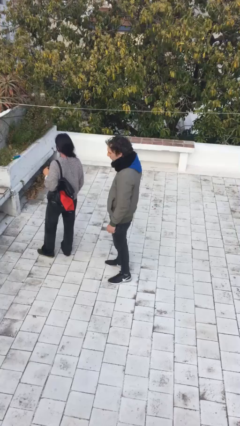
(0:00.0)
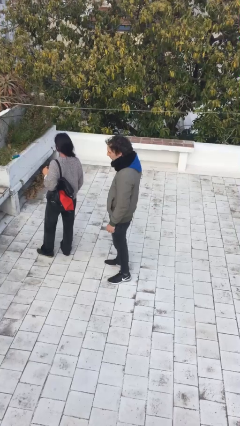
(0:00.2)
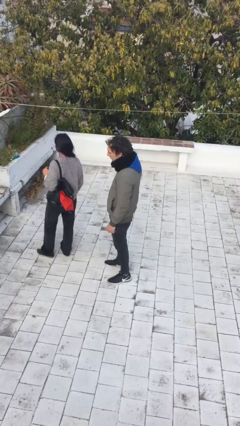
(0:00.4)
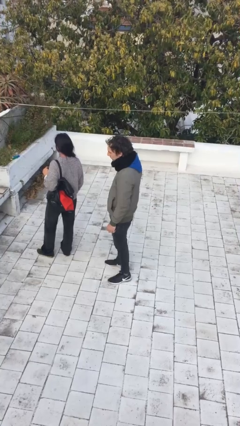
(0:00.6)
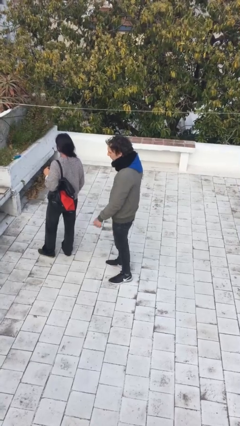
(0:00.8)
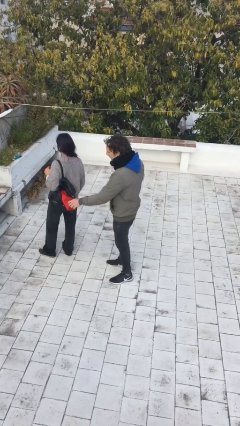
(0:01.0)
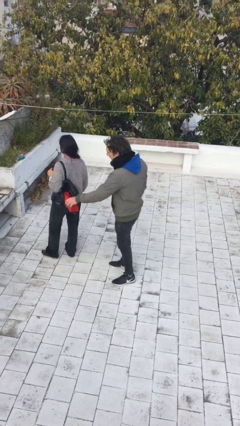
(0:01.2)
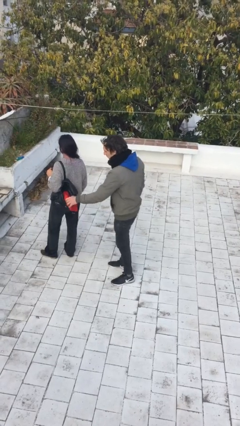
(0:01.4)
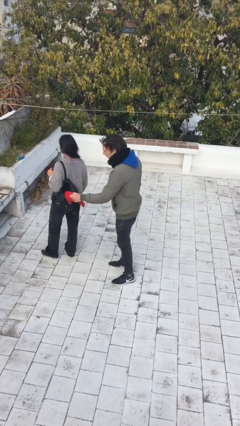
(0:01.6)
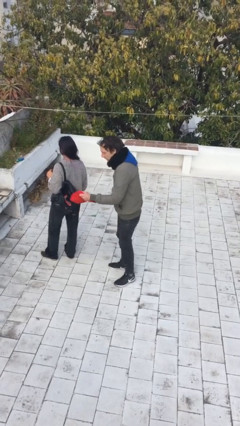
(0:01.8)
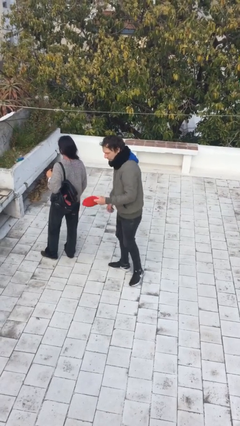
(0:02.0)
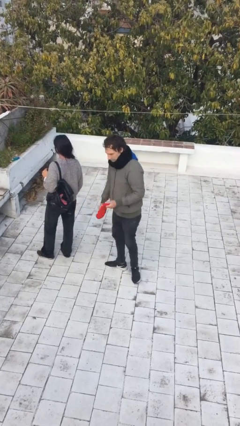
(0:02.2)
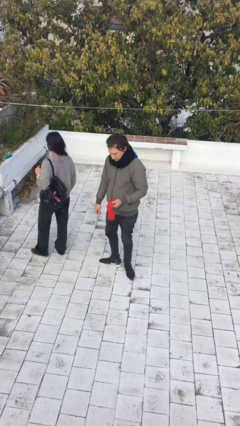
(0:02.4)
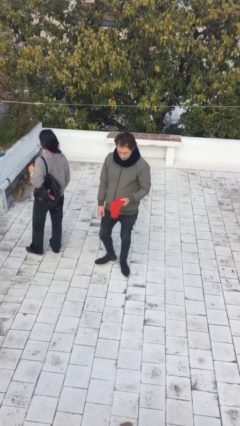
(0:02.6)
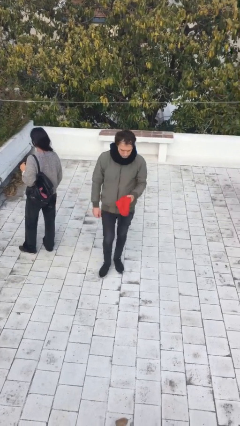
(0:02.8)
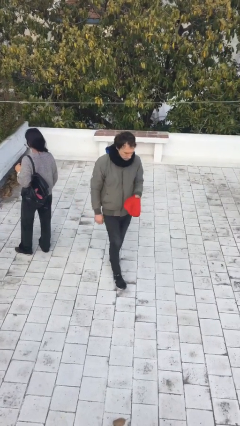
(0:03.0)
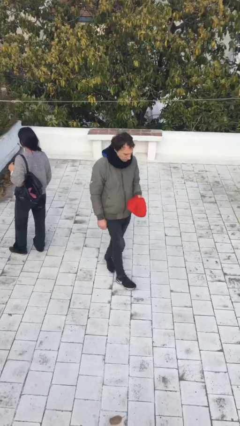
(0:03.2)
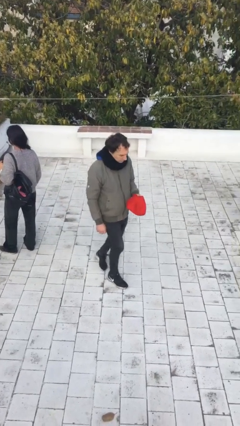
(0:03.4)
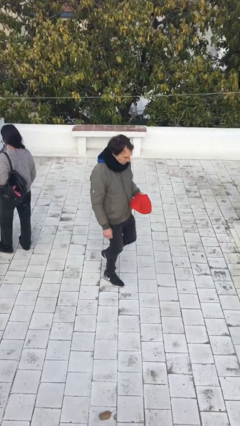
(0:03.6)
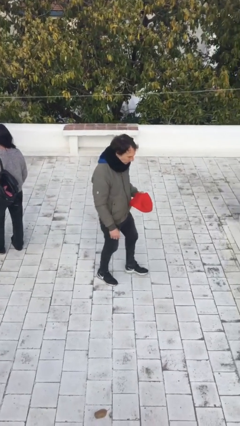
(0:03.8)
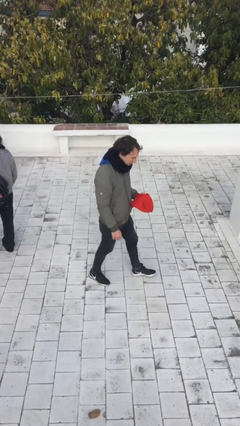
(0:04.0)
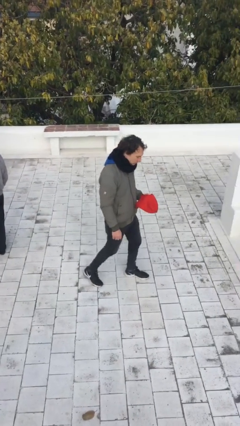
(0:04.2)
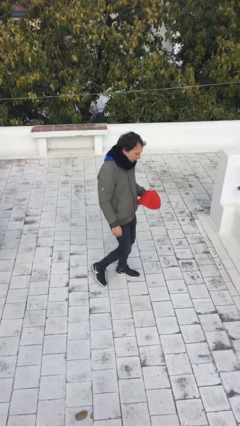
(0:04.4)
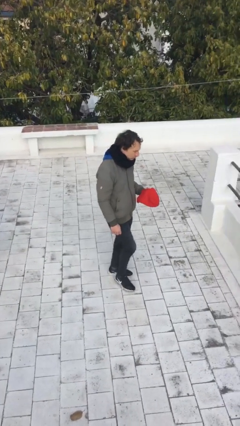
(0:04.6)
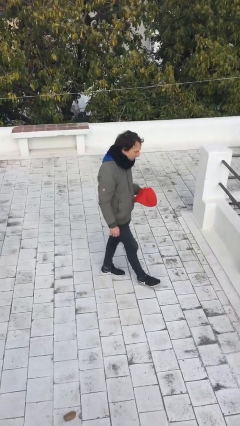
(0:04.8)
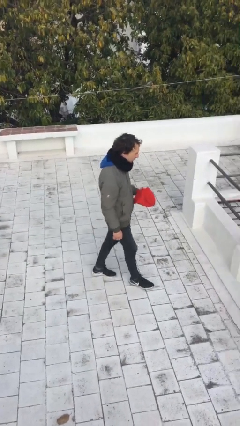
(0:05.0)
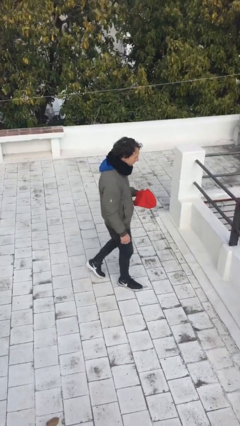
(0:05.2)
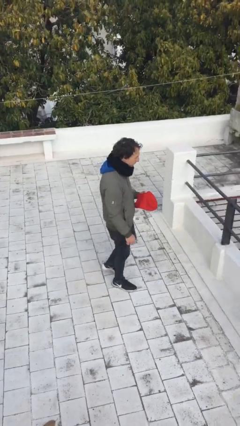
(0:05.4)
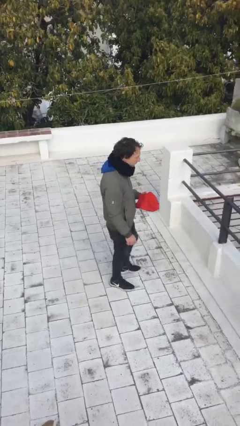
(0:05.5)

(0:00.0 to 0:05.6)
person steals object from person

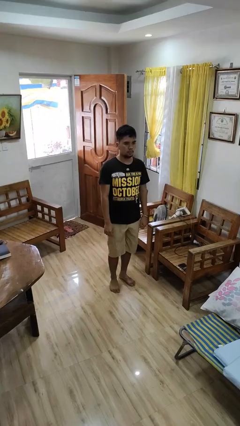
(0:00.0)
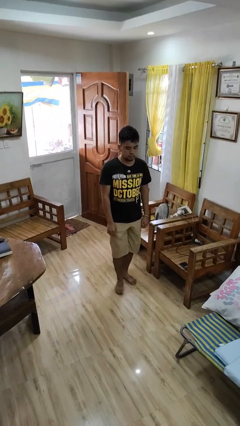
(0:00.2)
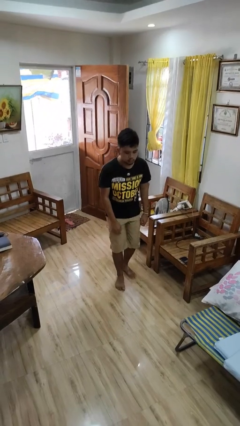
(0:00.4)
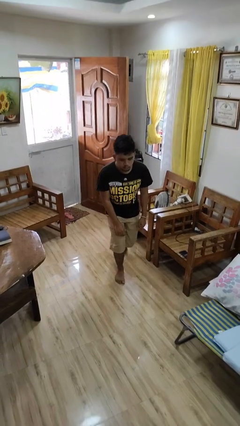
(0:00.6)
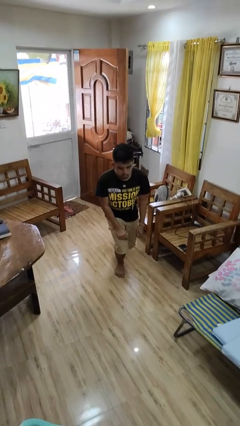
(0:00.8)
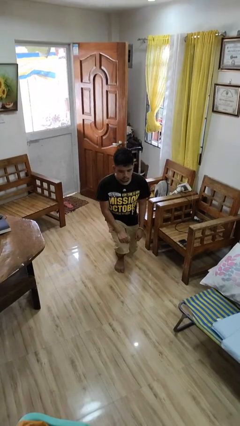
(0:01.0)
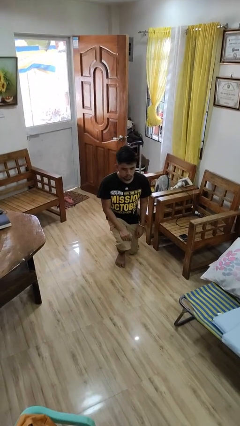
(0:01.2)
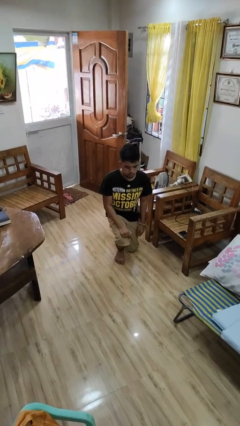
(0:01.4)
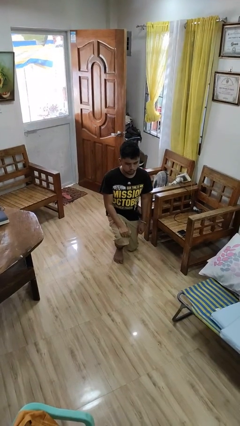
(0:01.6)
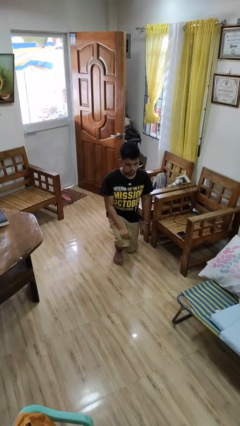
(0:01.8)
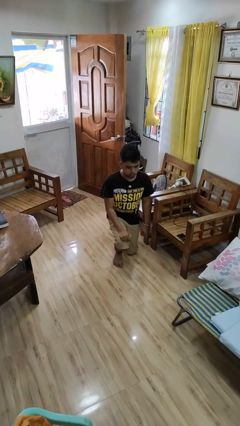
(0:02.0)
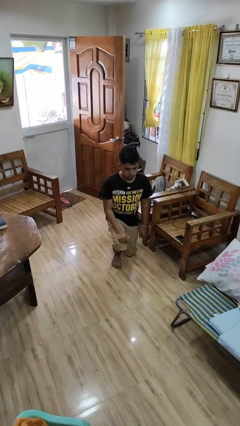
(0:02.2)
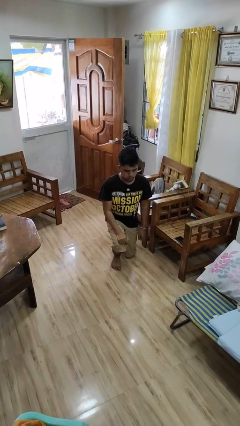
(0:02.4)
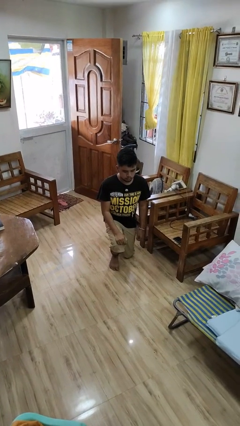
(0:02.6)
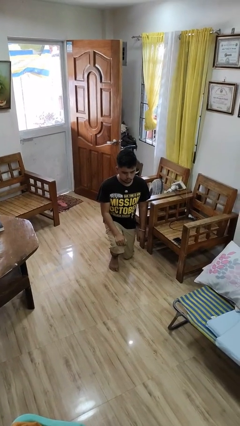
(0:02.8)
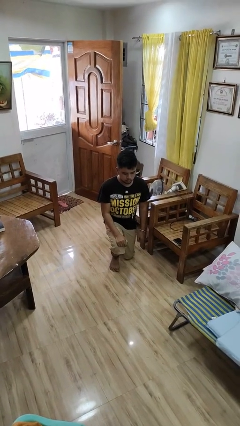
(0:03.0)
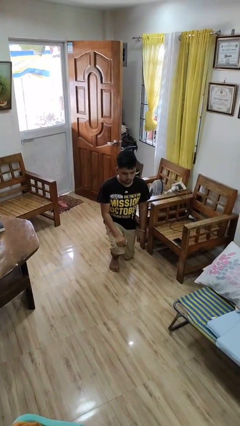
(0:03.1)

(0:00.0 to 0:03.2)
person kneels

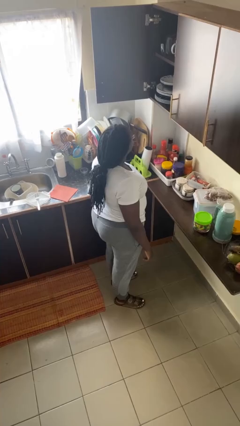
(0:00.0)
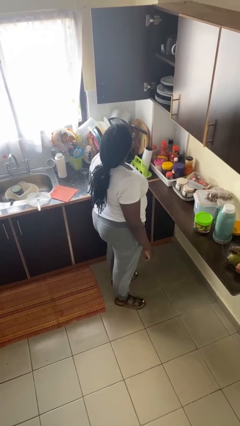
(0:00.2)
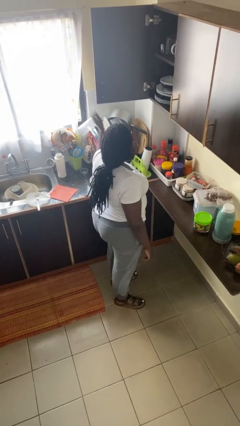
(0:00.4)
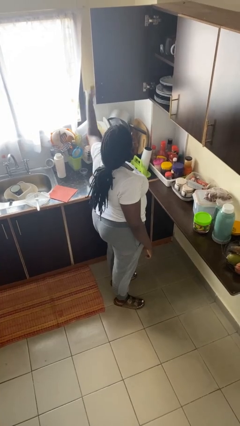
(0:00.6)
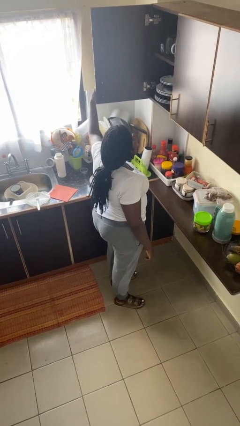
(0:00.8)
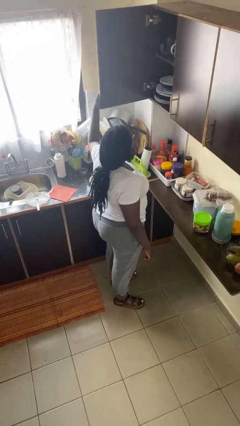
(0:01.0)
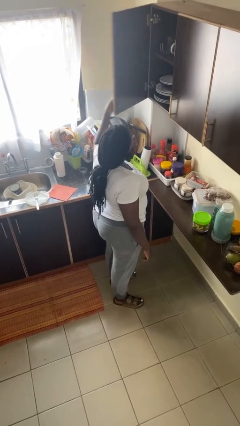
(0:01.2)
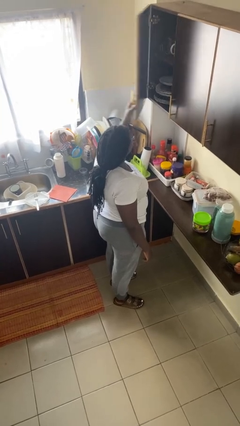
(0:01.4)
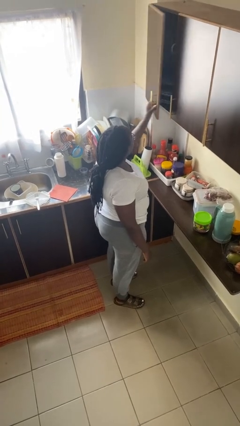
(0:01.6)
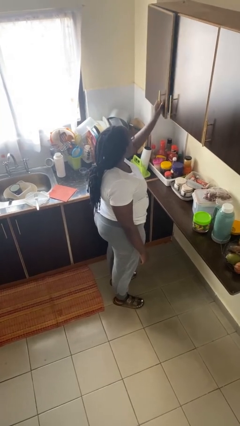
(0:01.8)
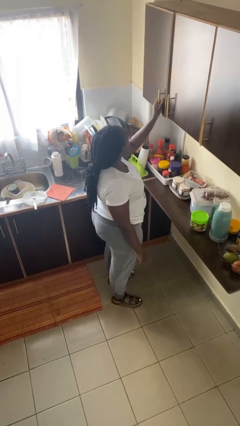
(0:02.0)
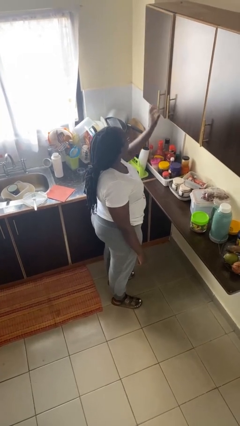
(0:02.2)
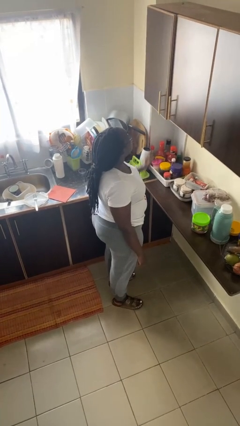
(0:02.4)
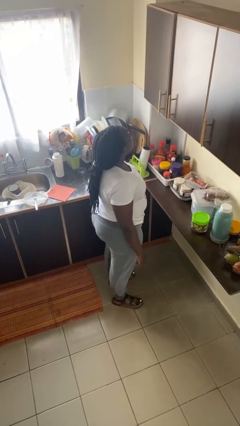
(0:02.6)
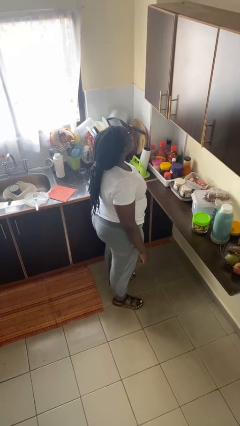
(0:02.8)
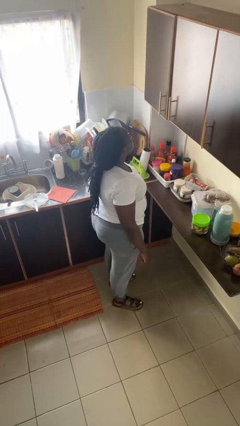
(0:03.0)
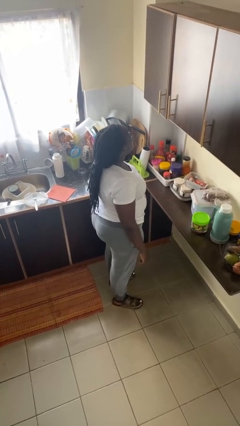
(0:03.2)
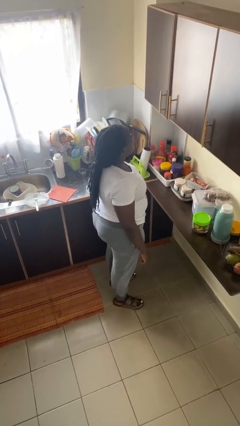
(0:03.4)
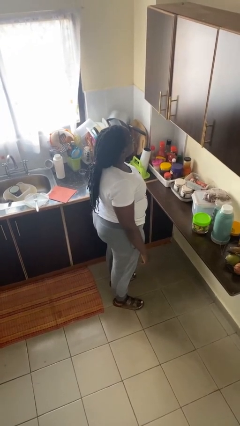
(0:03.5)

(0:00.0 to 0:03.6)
person closes cabinet

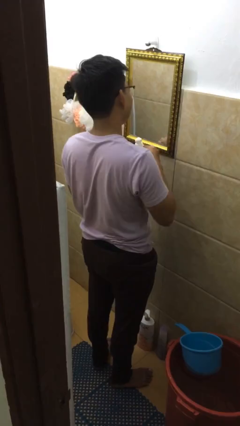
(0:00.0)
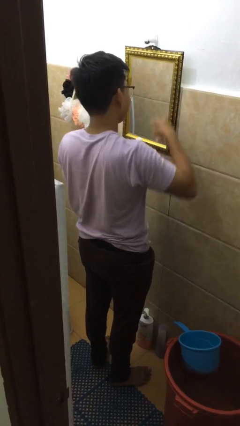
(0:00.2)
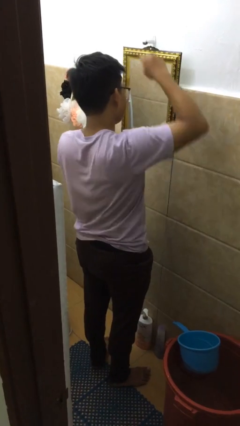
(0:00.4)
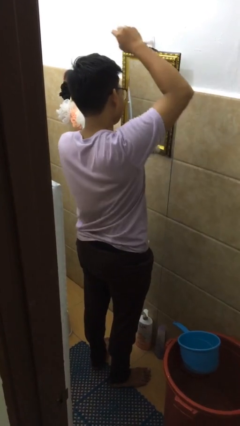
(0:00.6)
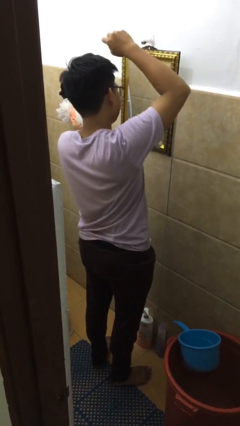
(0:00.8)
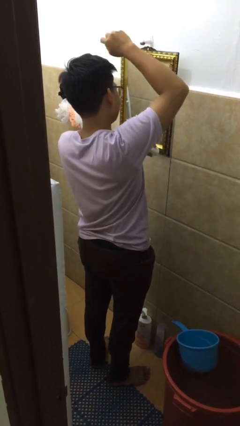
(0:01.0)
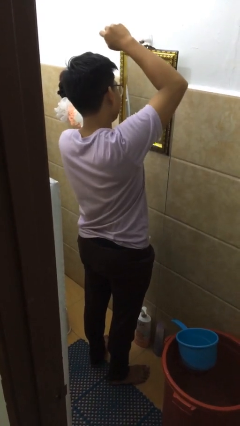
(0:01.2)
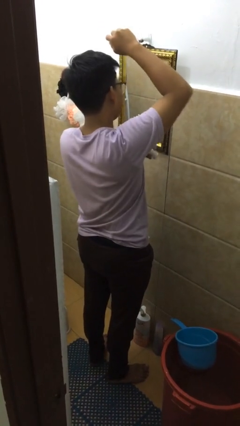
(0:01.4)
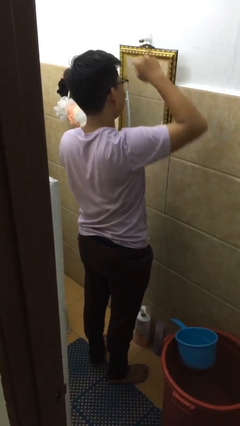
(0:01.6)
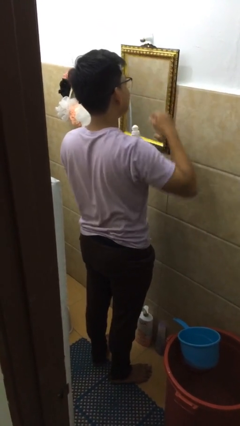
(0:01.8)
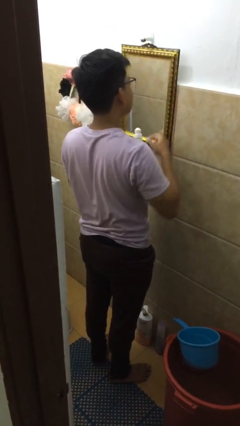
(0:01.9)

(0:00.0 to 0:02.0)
person applies deodorant

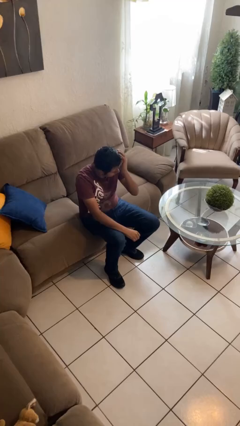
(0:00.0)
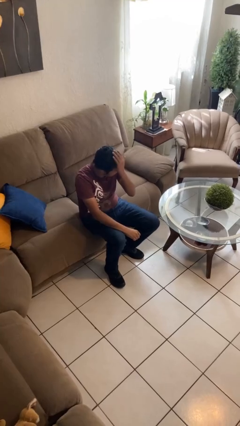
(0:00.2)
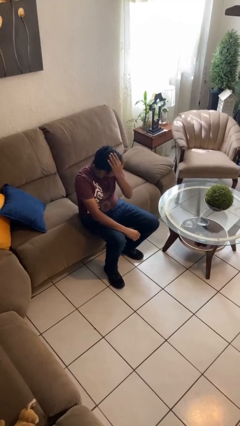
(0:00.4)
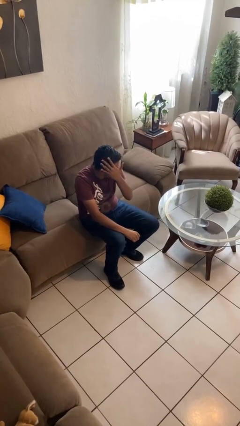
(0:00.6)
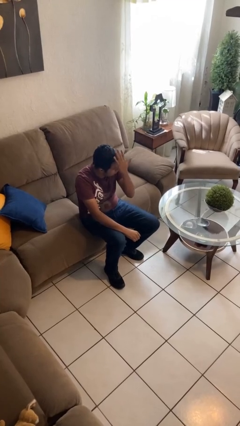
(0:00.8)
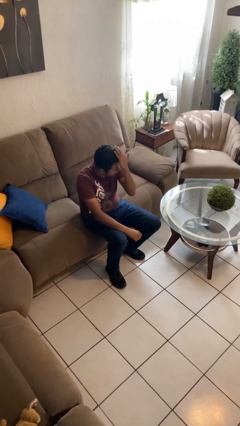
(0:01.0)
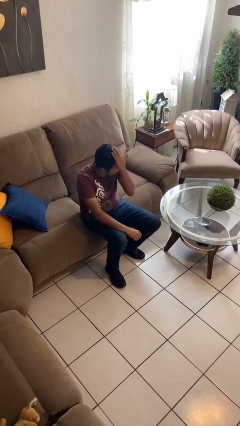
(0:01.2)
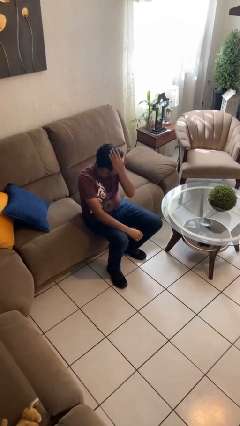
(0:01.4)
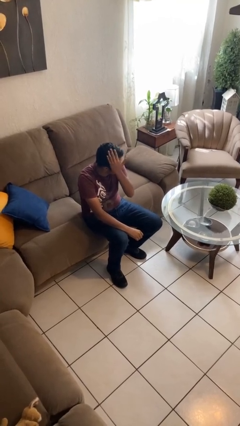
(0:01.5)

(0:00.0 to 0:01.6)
person pats head

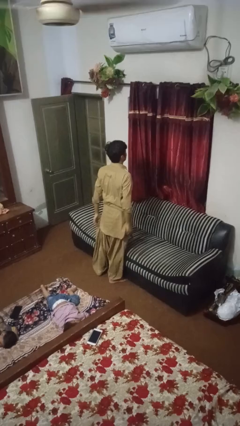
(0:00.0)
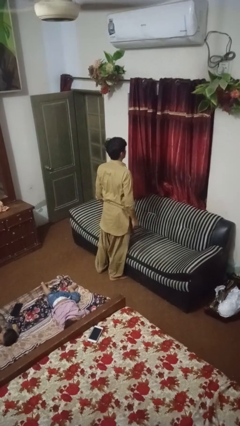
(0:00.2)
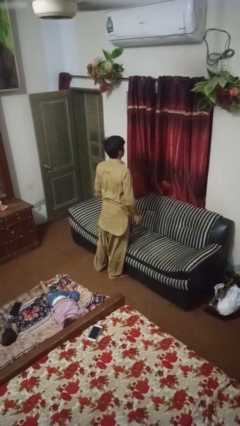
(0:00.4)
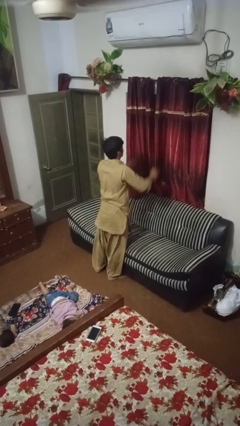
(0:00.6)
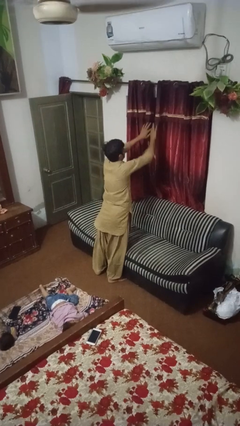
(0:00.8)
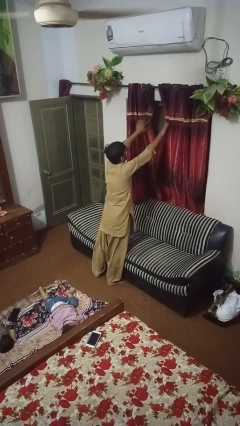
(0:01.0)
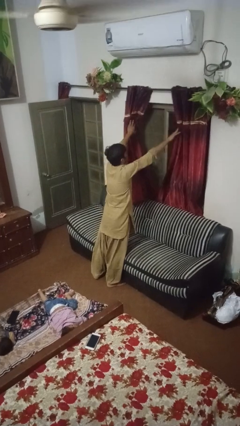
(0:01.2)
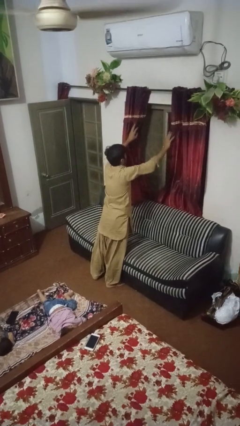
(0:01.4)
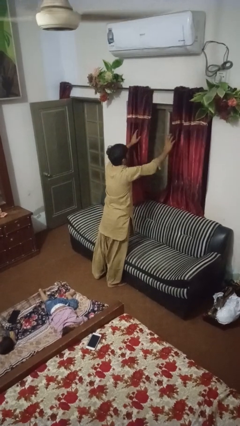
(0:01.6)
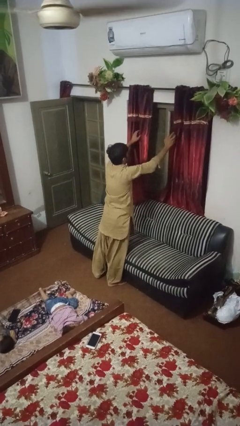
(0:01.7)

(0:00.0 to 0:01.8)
person opens curtains
